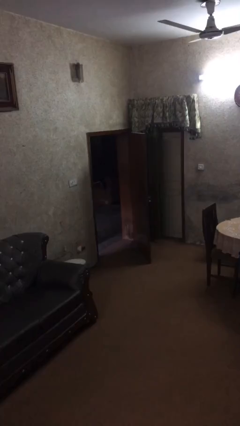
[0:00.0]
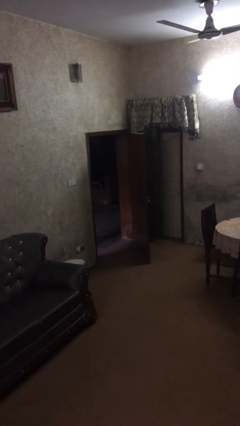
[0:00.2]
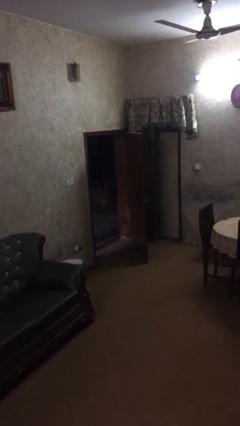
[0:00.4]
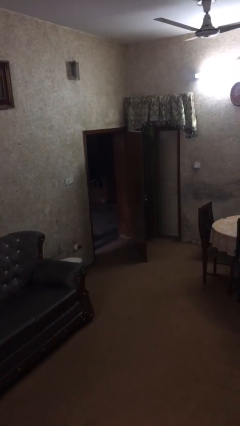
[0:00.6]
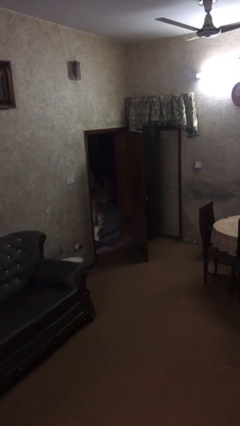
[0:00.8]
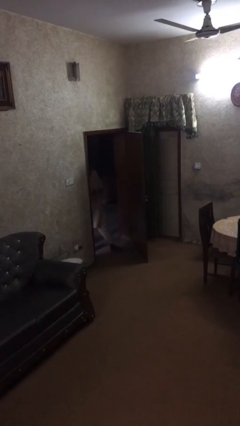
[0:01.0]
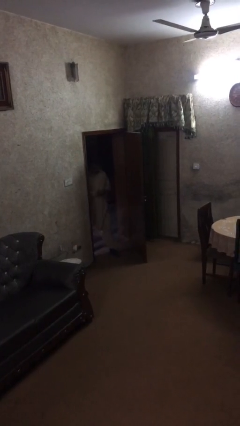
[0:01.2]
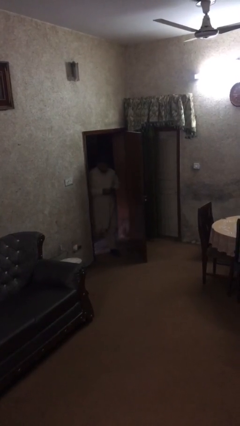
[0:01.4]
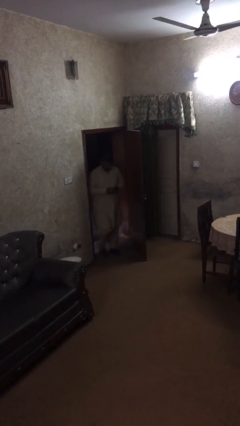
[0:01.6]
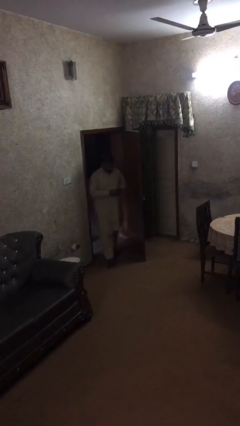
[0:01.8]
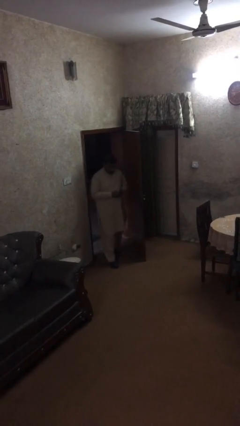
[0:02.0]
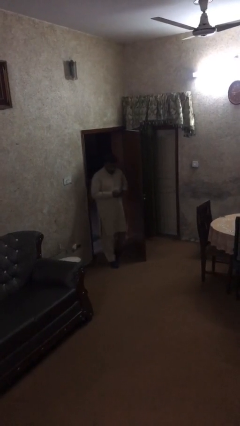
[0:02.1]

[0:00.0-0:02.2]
person enters scene through structure

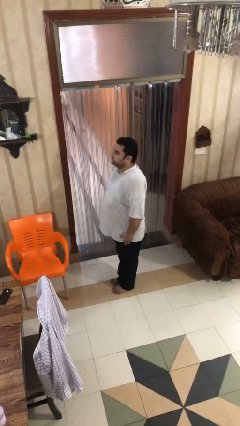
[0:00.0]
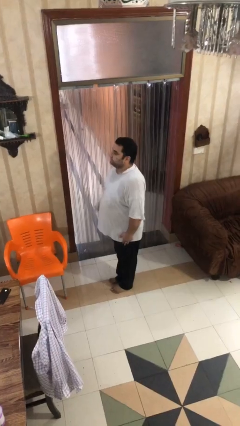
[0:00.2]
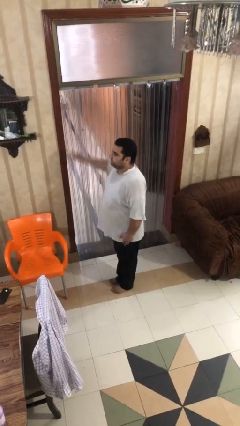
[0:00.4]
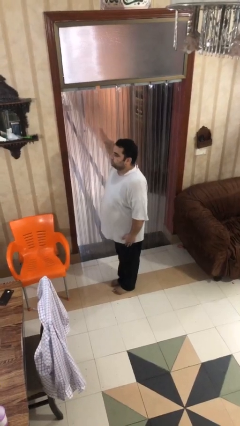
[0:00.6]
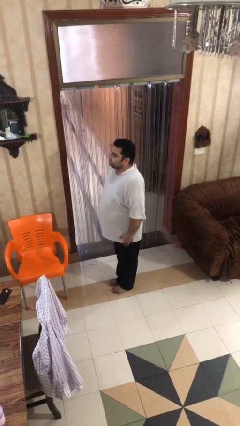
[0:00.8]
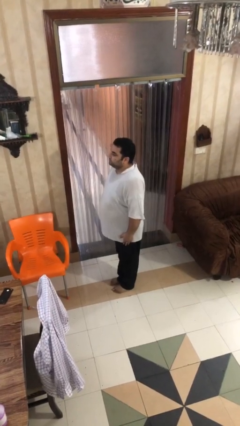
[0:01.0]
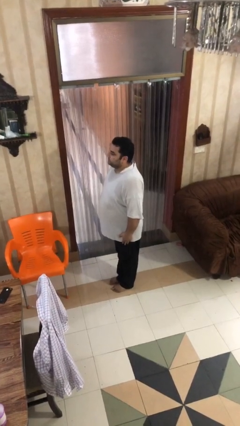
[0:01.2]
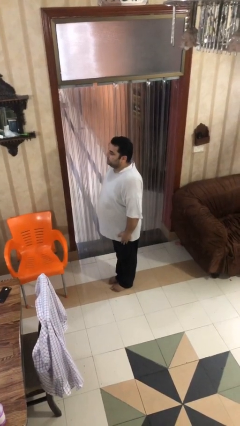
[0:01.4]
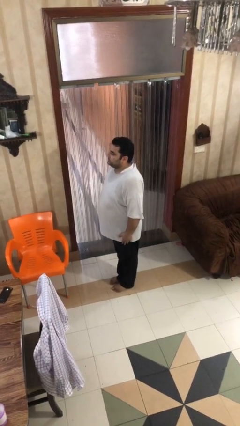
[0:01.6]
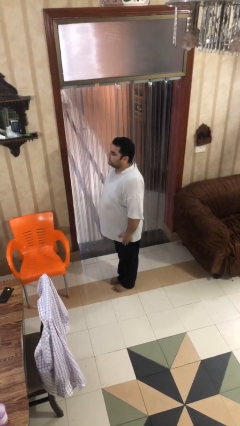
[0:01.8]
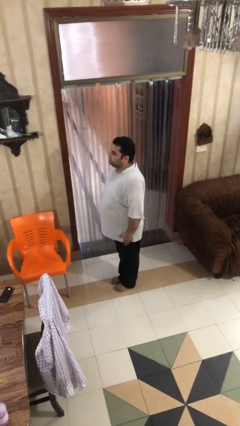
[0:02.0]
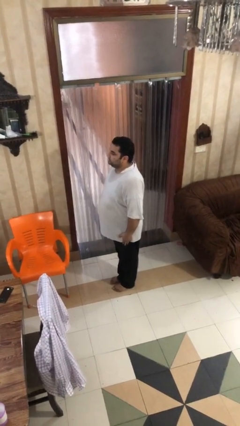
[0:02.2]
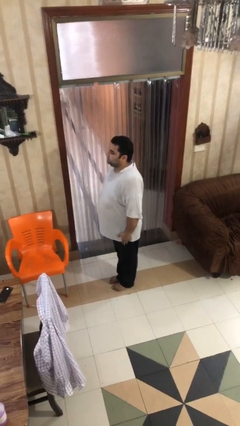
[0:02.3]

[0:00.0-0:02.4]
person salutes

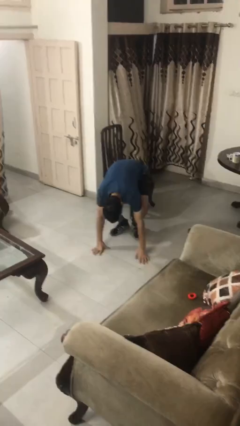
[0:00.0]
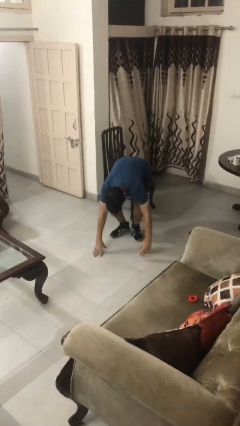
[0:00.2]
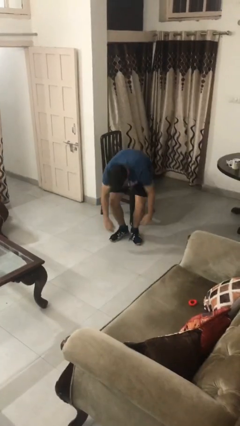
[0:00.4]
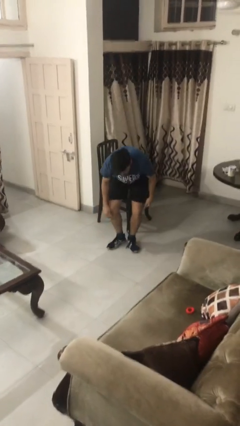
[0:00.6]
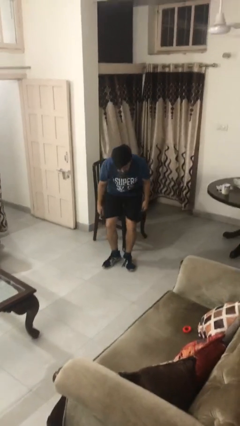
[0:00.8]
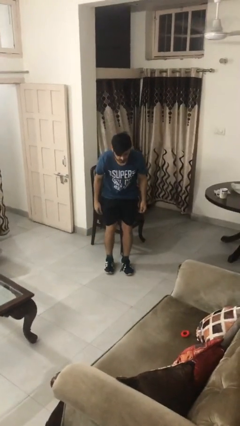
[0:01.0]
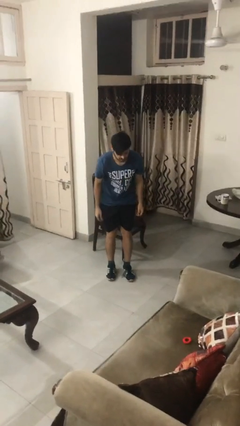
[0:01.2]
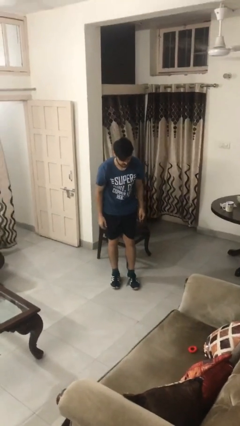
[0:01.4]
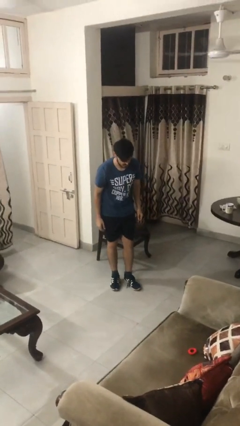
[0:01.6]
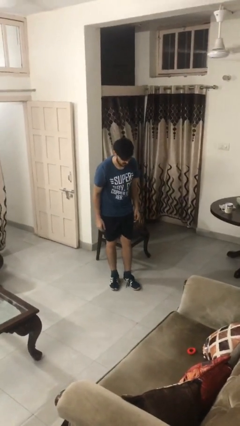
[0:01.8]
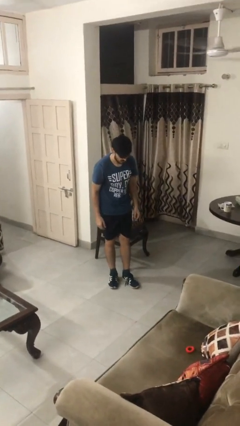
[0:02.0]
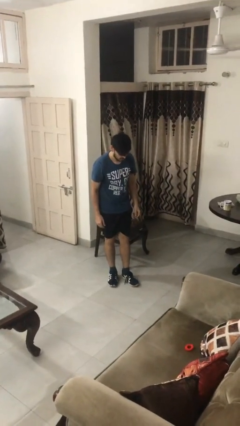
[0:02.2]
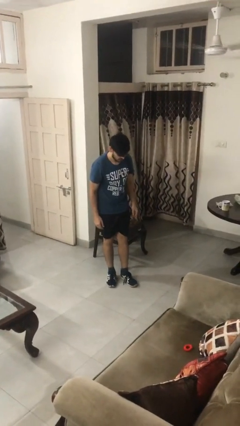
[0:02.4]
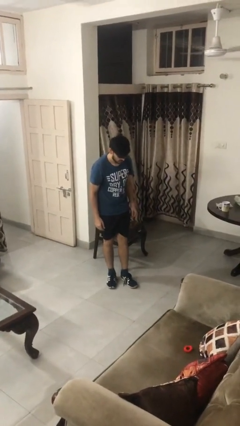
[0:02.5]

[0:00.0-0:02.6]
person stands up from floor

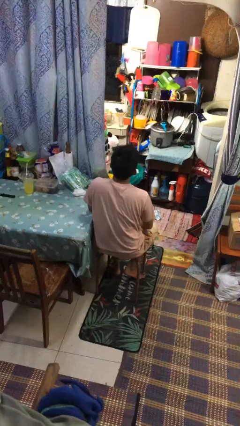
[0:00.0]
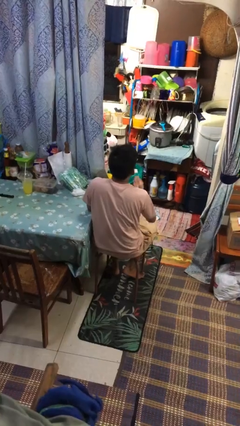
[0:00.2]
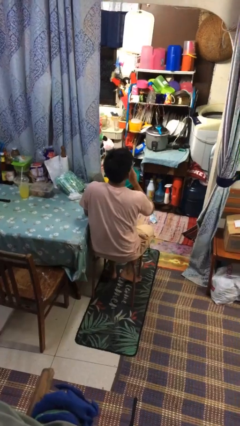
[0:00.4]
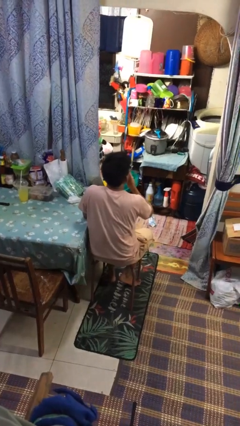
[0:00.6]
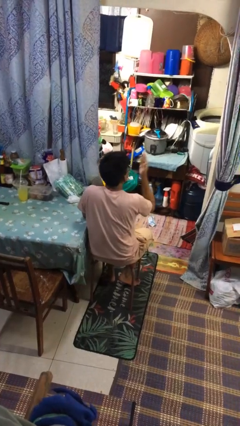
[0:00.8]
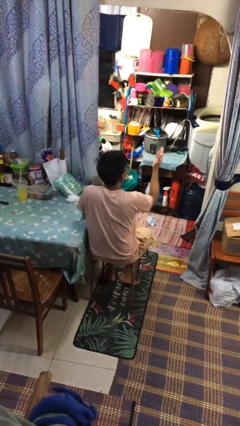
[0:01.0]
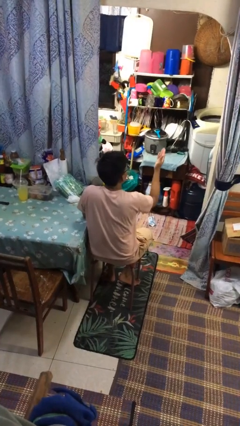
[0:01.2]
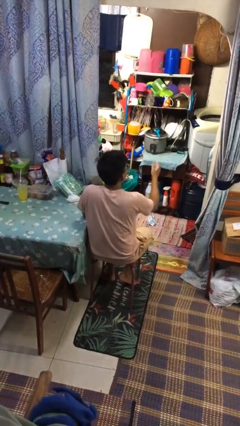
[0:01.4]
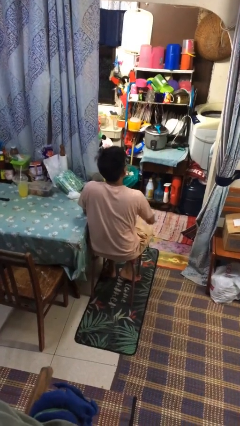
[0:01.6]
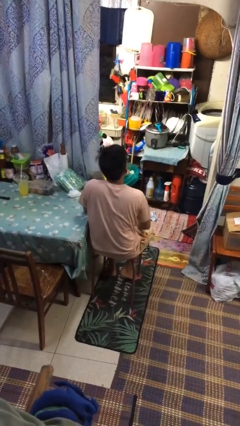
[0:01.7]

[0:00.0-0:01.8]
person gestures blow kiss

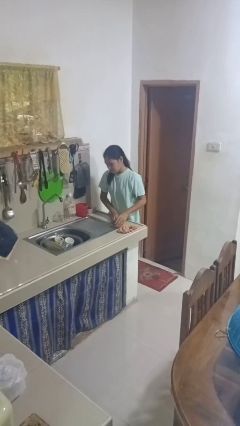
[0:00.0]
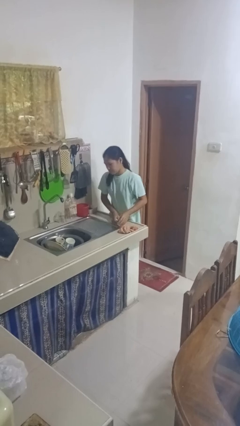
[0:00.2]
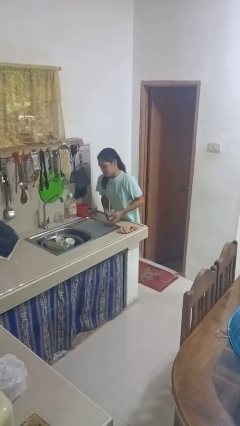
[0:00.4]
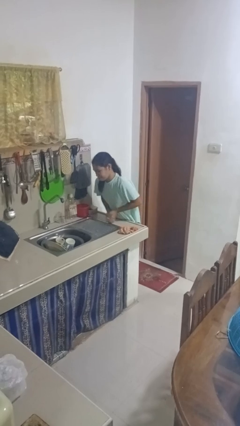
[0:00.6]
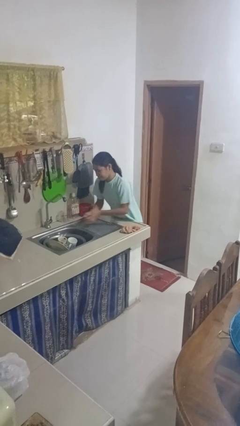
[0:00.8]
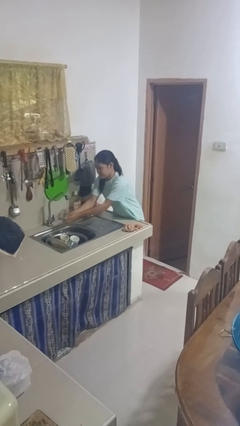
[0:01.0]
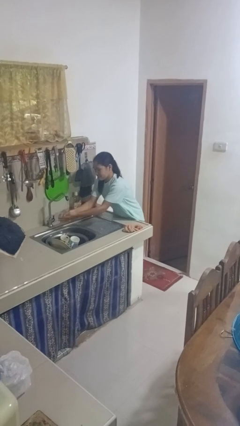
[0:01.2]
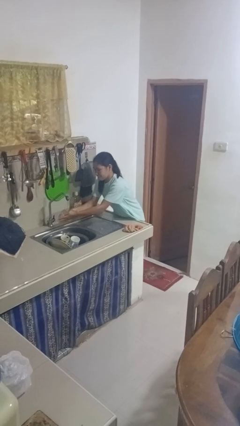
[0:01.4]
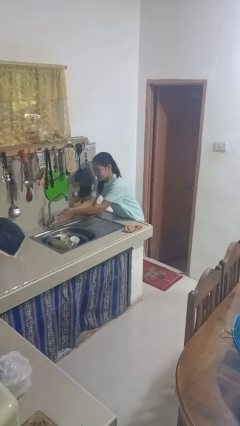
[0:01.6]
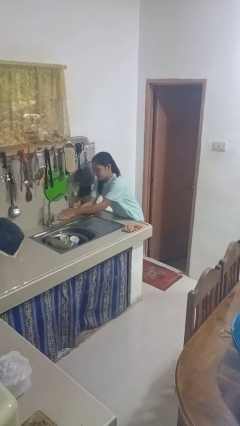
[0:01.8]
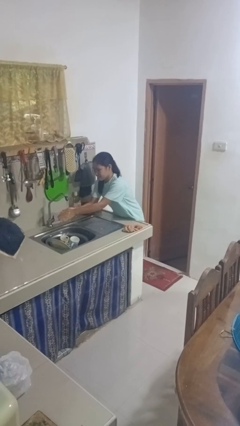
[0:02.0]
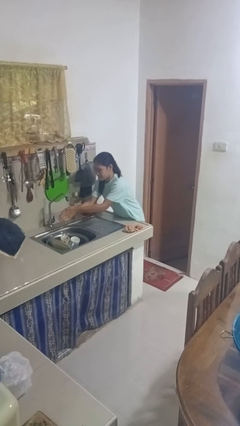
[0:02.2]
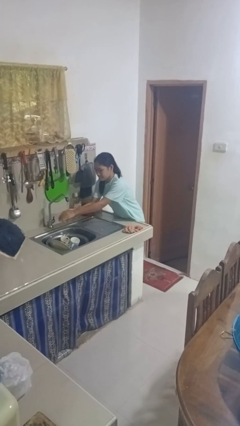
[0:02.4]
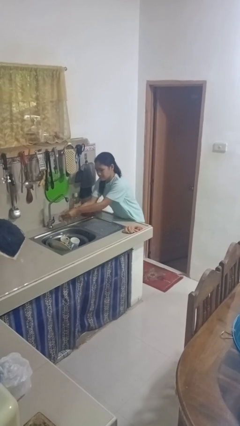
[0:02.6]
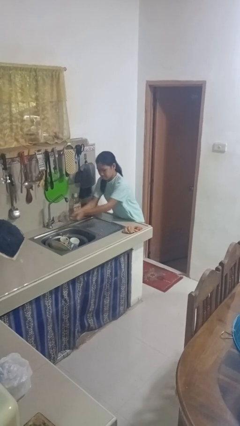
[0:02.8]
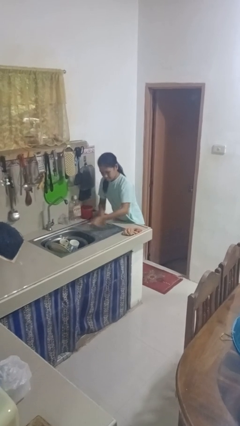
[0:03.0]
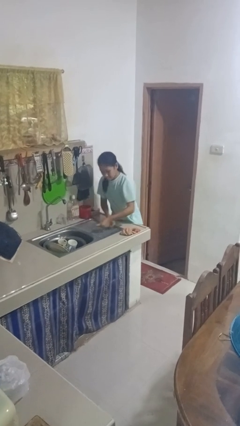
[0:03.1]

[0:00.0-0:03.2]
person washes hands

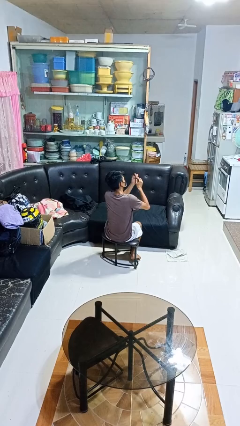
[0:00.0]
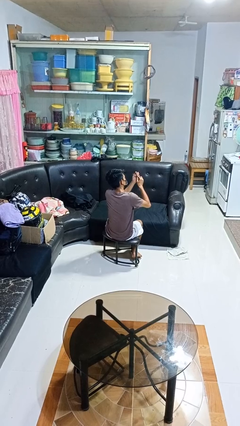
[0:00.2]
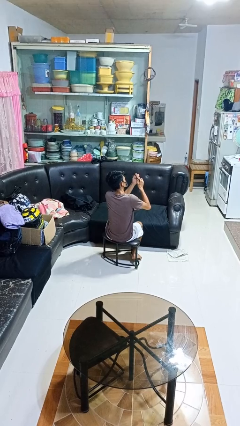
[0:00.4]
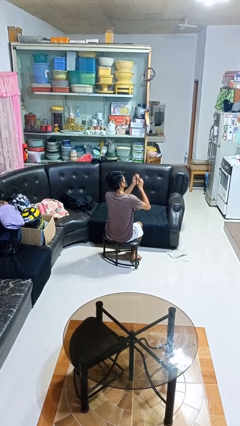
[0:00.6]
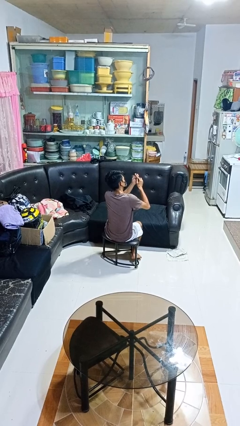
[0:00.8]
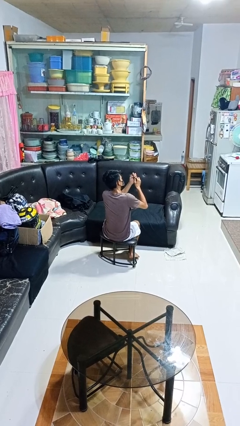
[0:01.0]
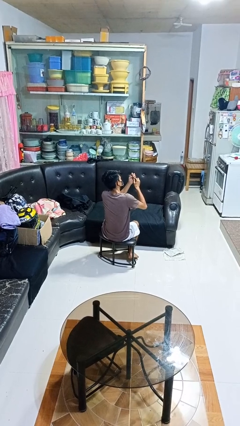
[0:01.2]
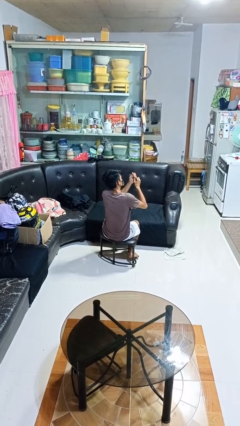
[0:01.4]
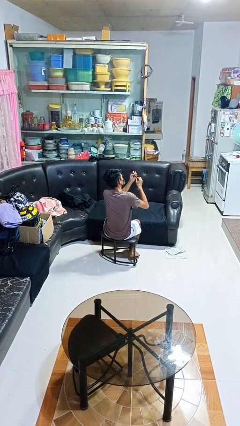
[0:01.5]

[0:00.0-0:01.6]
person files fingernails

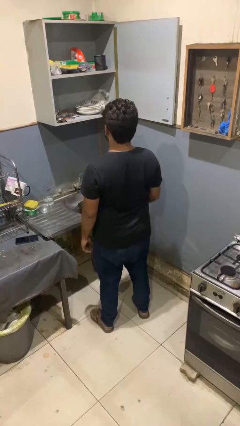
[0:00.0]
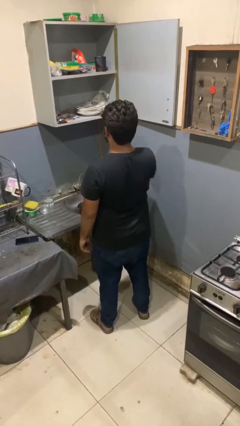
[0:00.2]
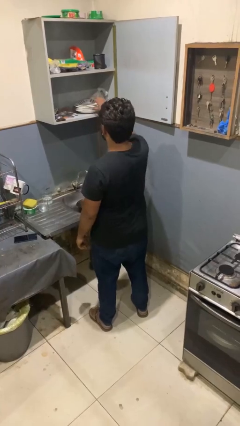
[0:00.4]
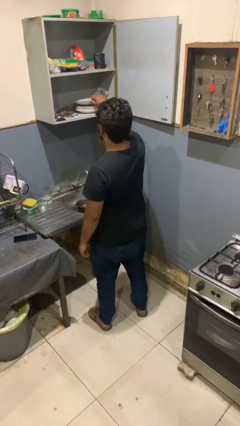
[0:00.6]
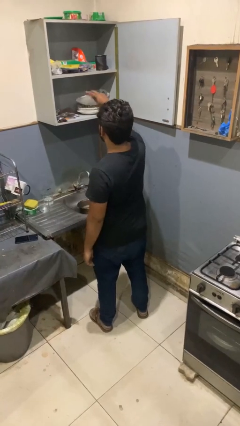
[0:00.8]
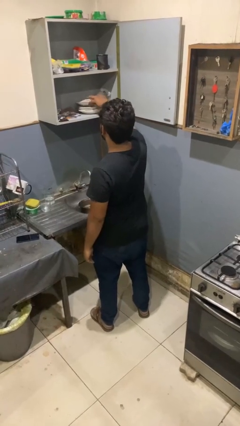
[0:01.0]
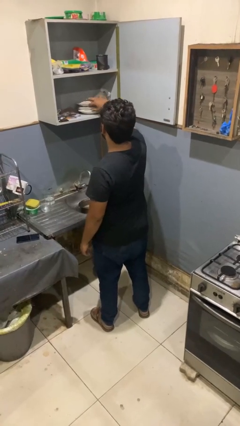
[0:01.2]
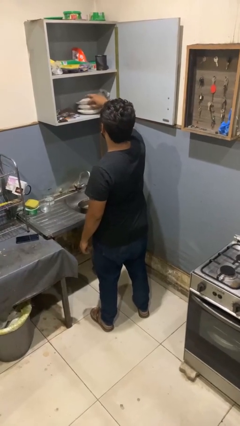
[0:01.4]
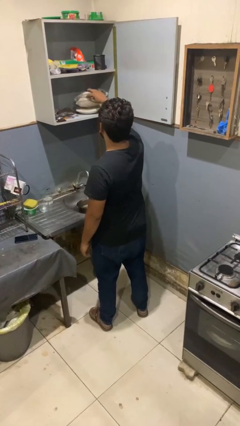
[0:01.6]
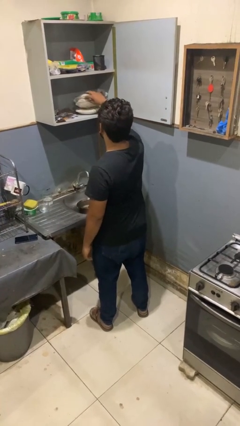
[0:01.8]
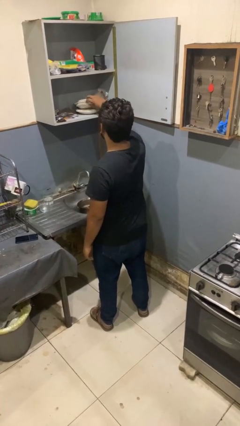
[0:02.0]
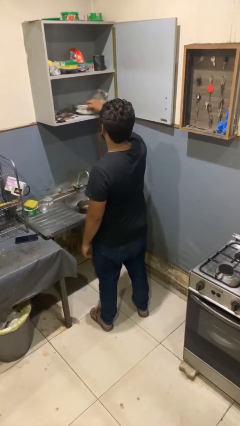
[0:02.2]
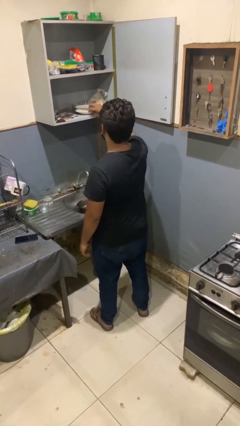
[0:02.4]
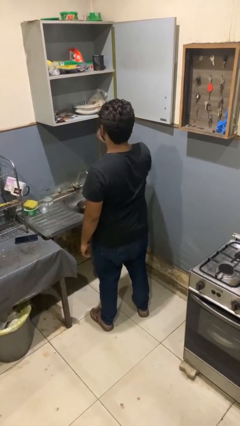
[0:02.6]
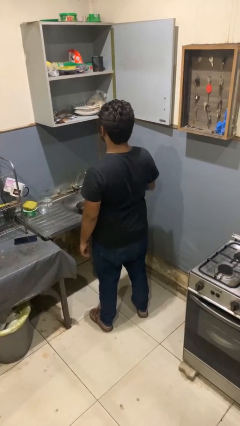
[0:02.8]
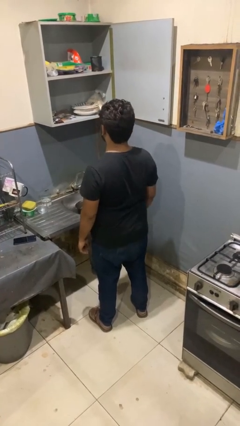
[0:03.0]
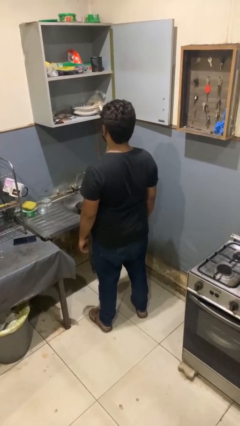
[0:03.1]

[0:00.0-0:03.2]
person searches in kitchen drawer

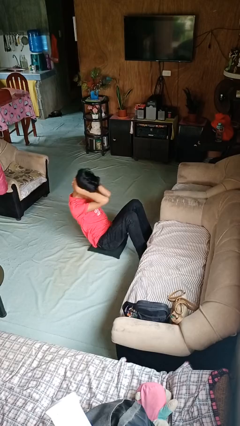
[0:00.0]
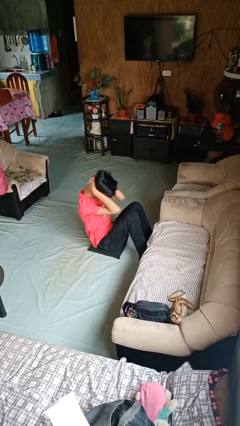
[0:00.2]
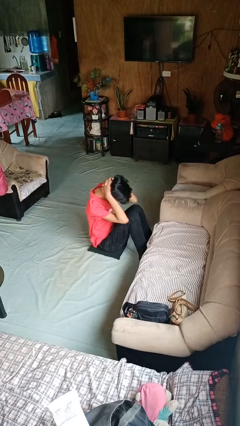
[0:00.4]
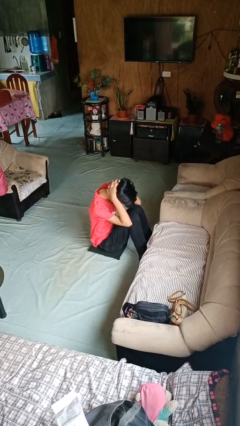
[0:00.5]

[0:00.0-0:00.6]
person exercises with situp
